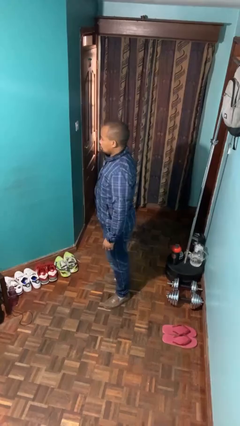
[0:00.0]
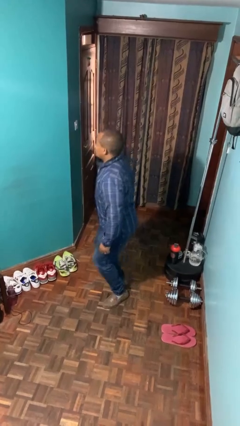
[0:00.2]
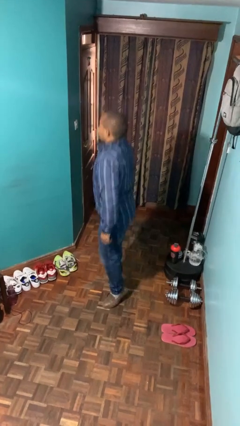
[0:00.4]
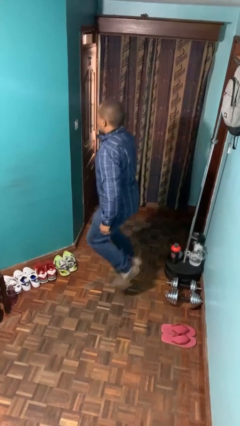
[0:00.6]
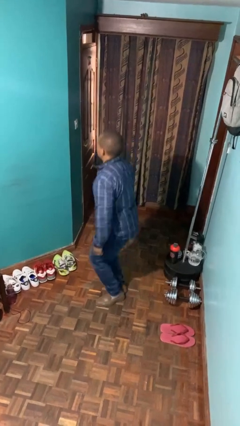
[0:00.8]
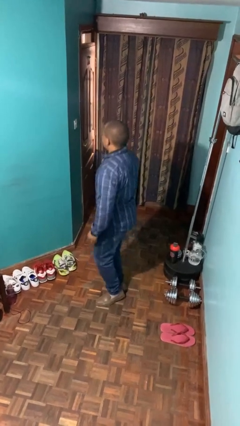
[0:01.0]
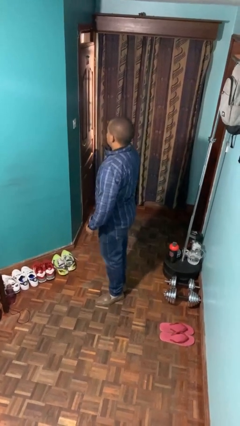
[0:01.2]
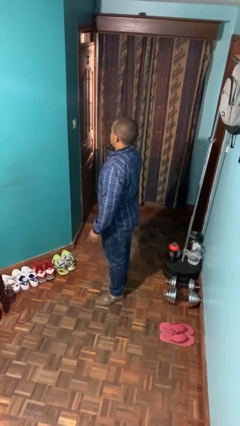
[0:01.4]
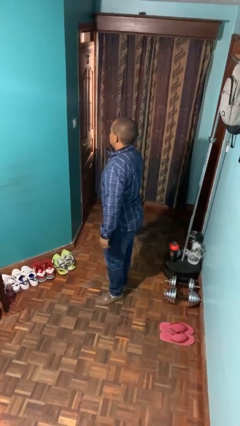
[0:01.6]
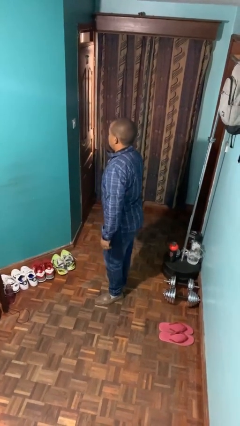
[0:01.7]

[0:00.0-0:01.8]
person jumps

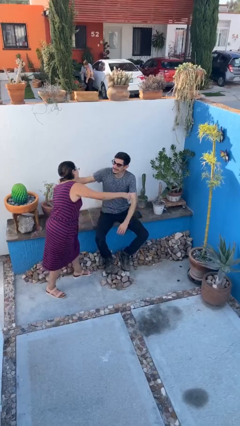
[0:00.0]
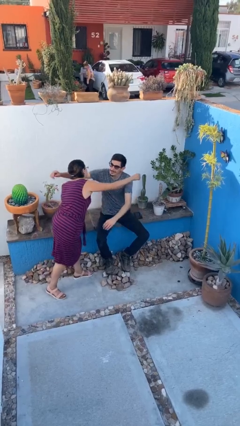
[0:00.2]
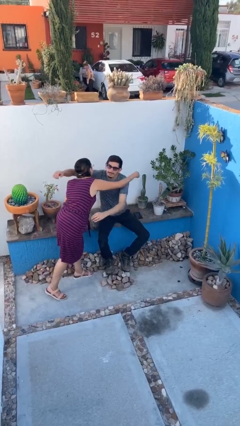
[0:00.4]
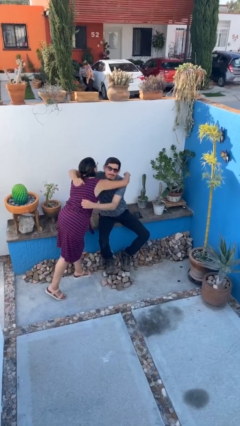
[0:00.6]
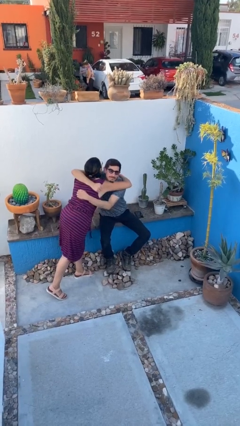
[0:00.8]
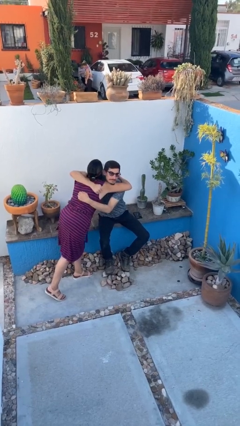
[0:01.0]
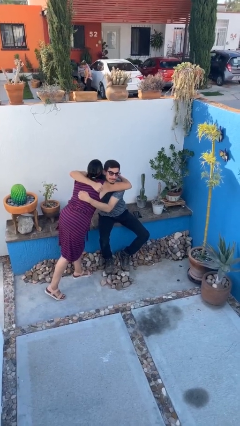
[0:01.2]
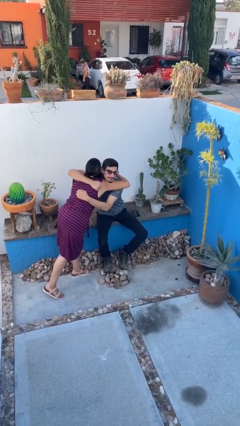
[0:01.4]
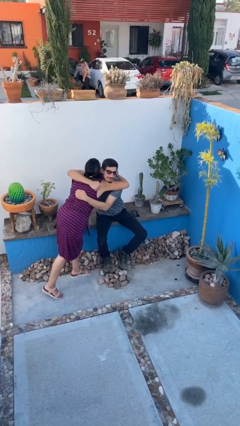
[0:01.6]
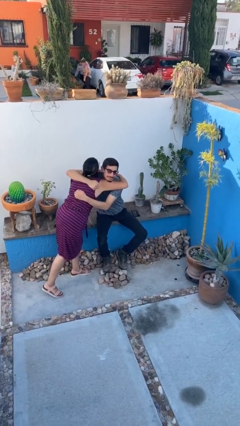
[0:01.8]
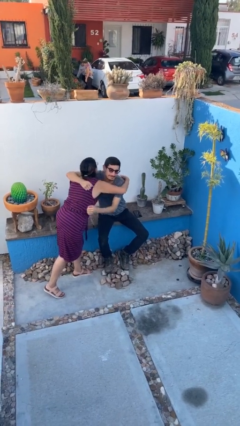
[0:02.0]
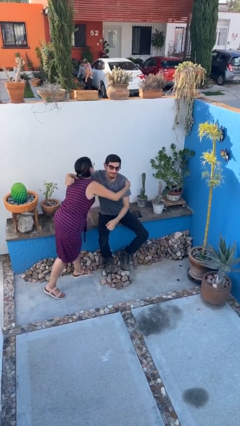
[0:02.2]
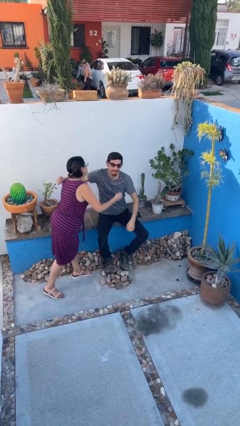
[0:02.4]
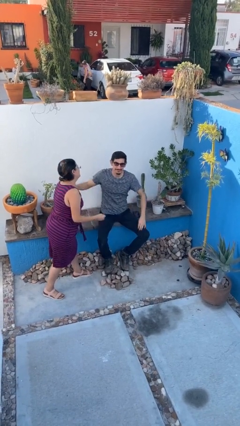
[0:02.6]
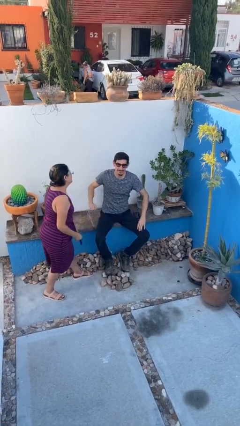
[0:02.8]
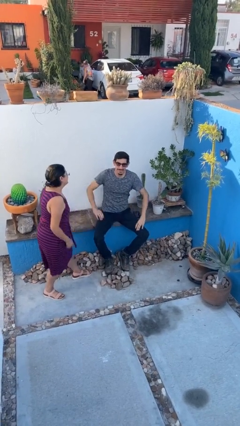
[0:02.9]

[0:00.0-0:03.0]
person embraces person

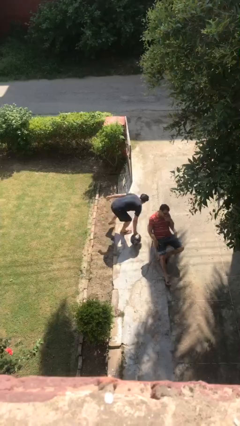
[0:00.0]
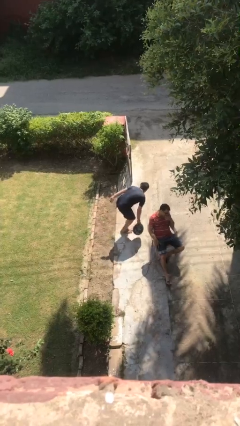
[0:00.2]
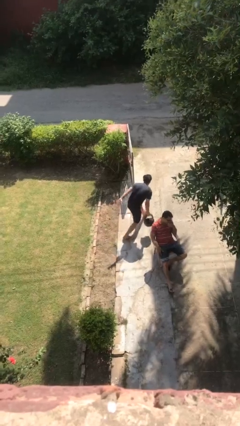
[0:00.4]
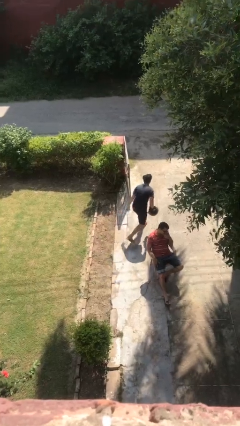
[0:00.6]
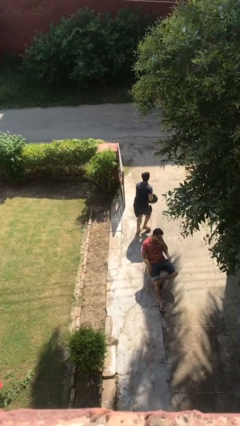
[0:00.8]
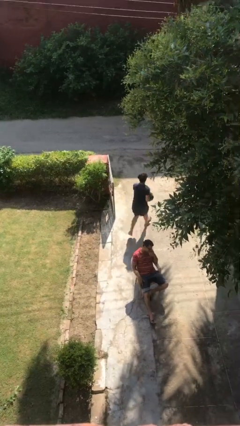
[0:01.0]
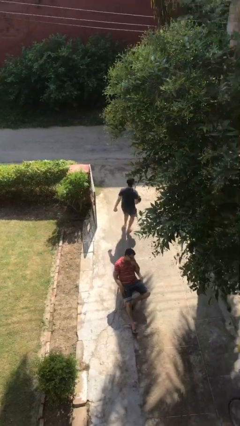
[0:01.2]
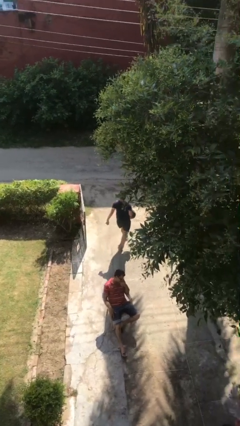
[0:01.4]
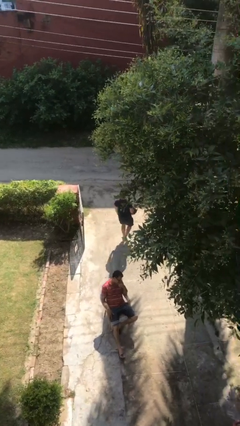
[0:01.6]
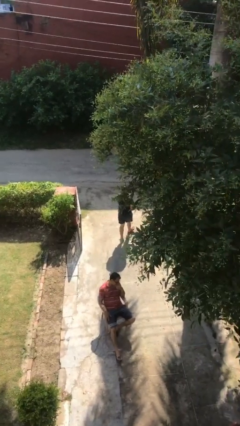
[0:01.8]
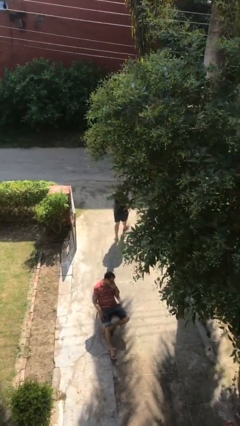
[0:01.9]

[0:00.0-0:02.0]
person steals object from person

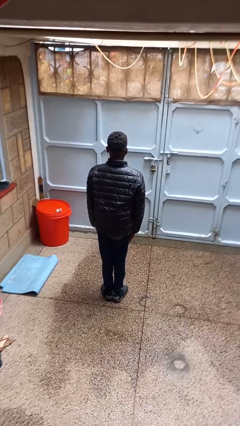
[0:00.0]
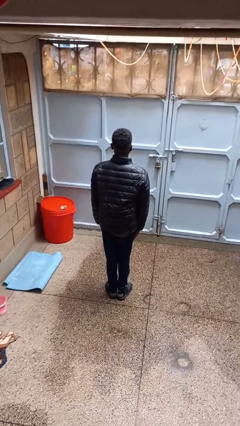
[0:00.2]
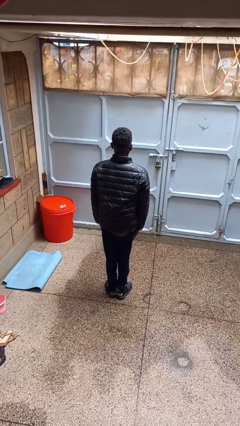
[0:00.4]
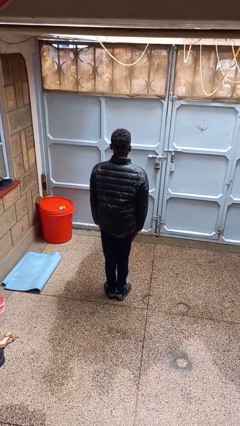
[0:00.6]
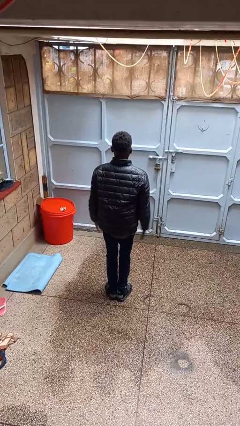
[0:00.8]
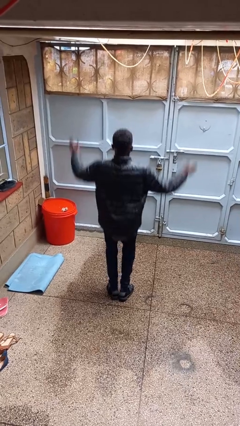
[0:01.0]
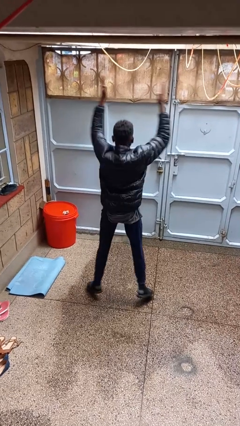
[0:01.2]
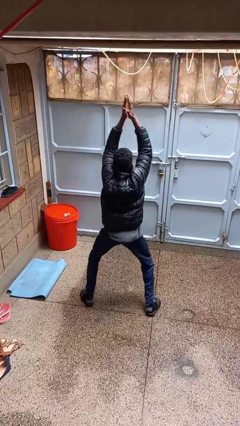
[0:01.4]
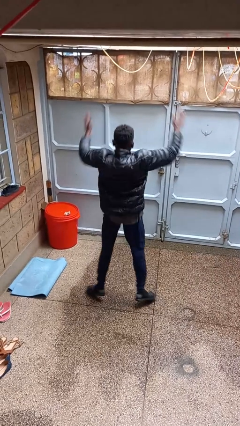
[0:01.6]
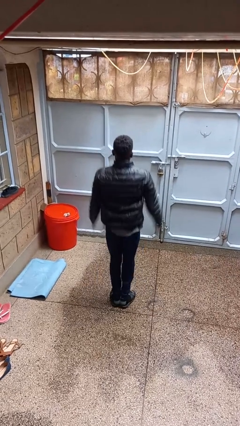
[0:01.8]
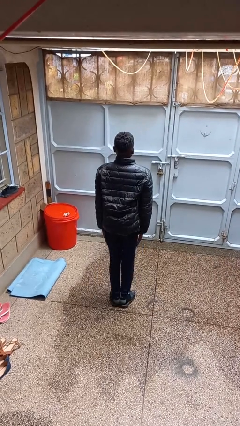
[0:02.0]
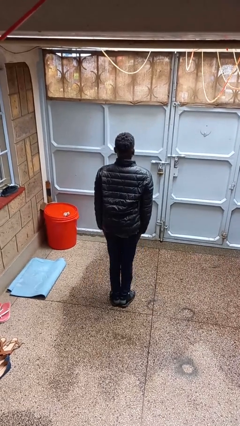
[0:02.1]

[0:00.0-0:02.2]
person exercises with jumping jacks

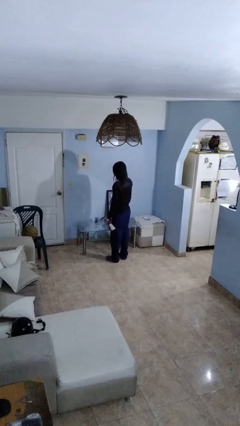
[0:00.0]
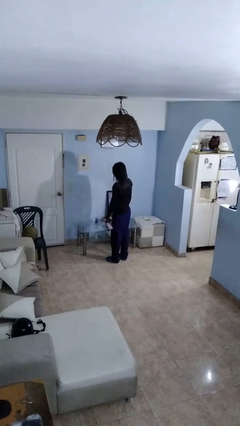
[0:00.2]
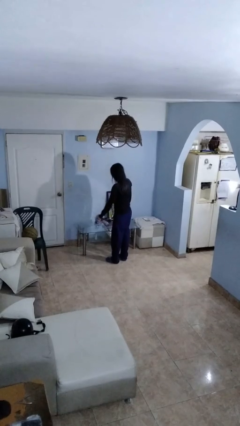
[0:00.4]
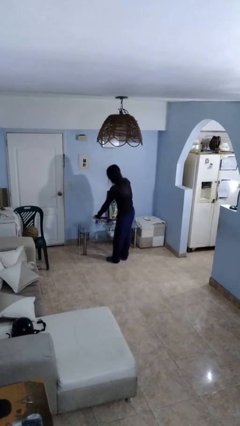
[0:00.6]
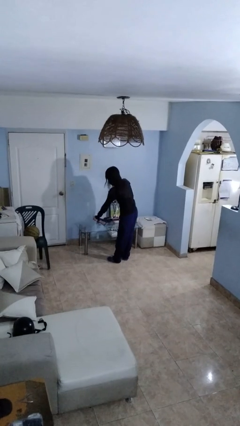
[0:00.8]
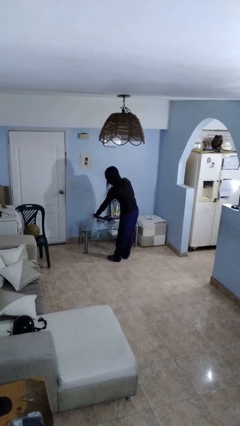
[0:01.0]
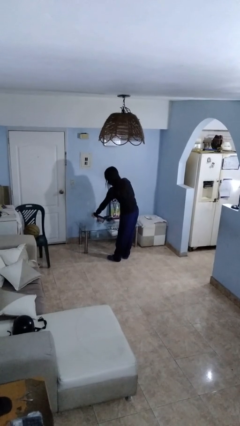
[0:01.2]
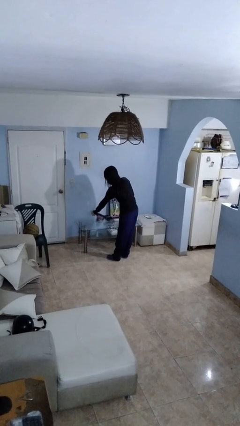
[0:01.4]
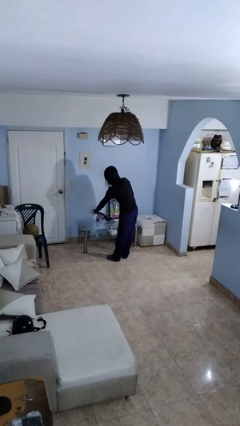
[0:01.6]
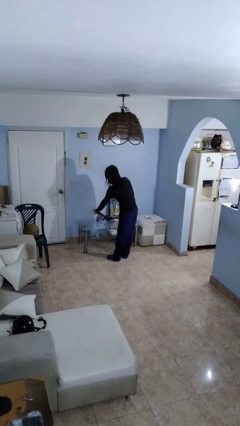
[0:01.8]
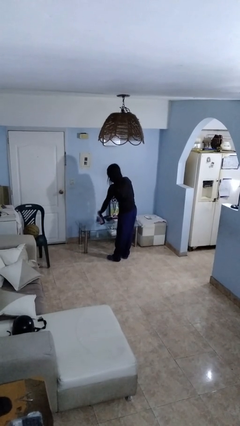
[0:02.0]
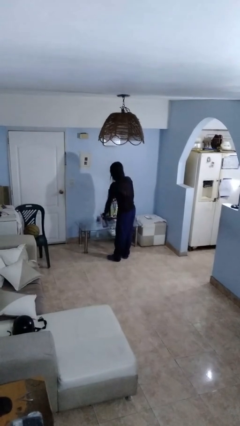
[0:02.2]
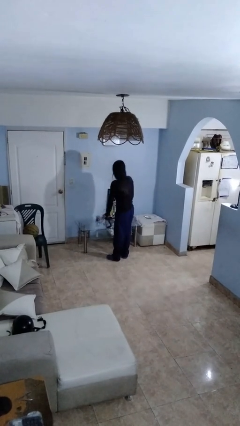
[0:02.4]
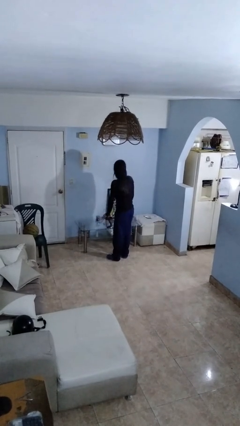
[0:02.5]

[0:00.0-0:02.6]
person sprays from bottle

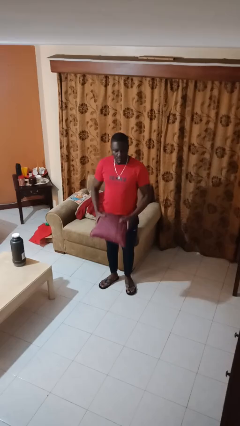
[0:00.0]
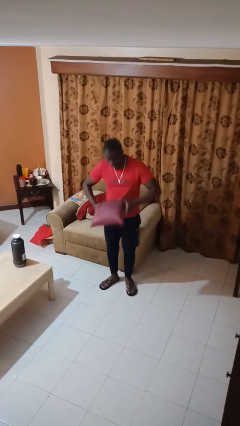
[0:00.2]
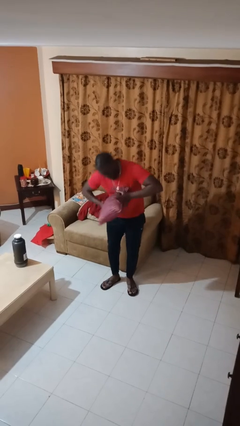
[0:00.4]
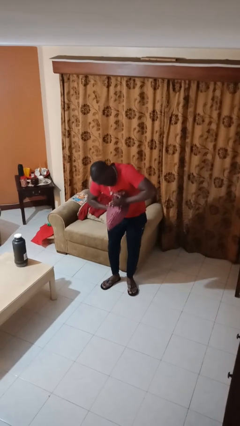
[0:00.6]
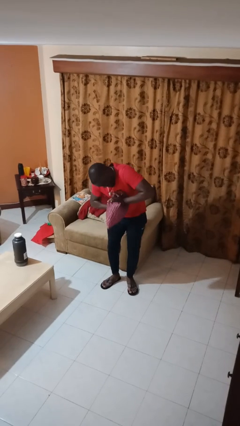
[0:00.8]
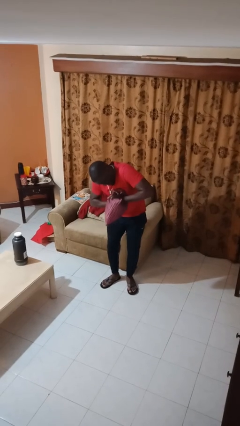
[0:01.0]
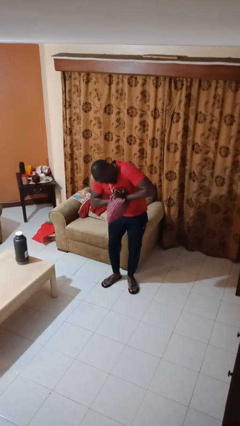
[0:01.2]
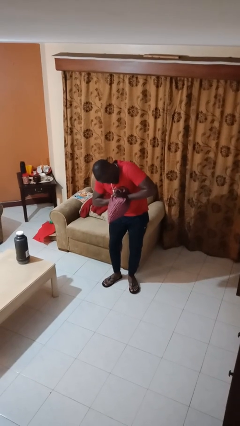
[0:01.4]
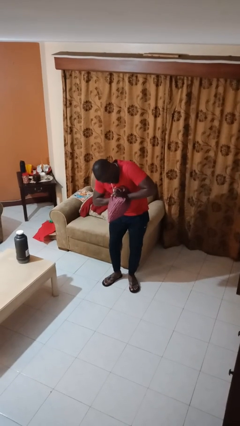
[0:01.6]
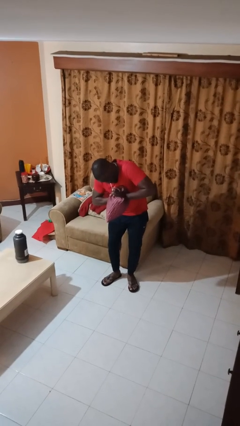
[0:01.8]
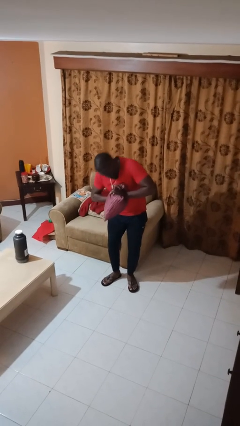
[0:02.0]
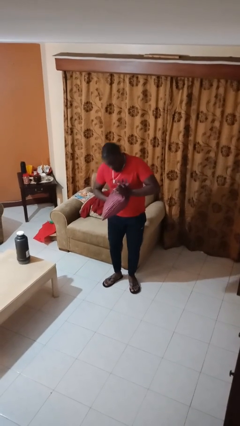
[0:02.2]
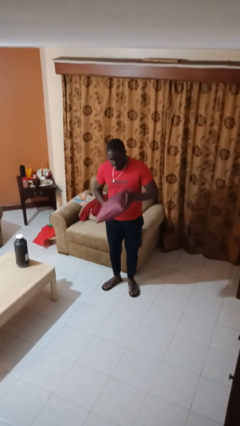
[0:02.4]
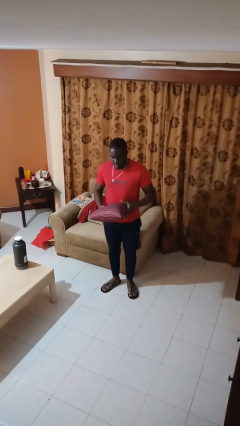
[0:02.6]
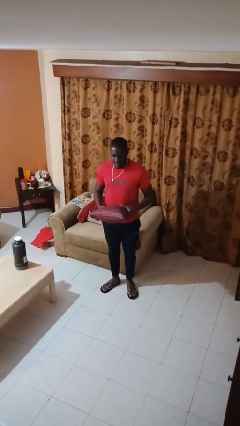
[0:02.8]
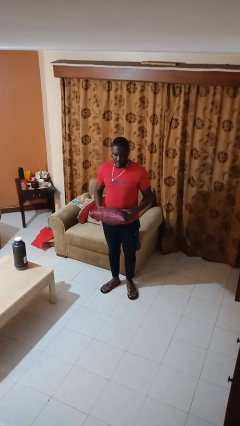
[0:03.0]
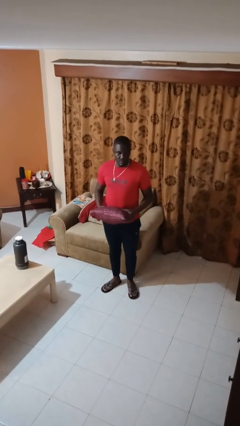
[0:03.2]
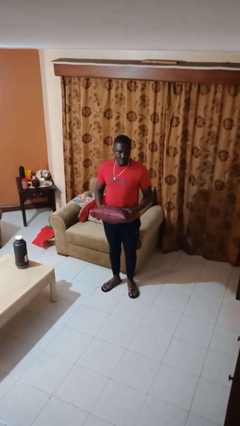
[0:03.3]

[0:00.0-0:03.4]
person squeezes object

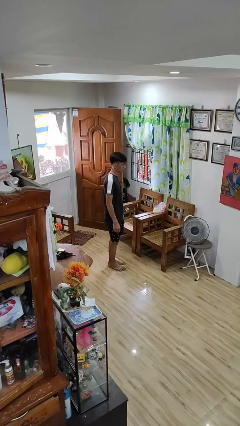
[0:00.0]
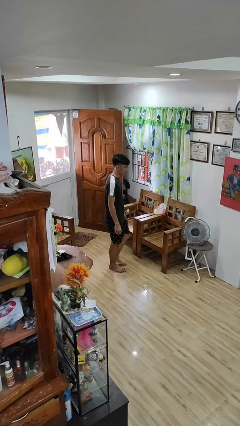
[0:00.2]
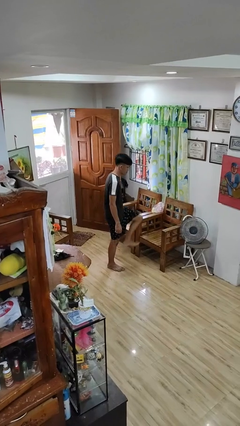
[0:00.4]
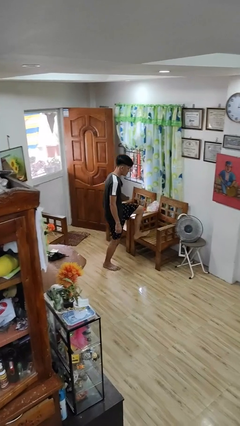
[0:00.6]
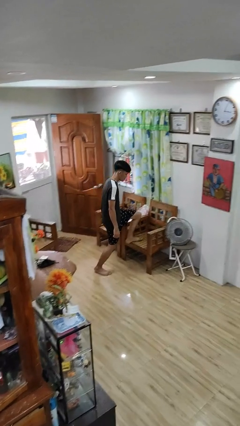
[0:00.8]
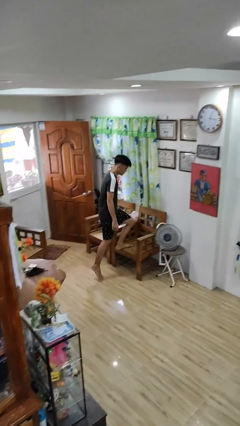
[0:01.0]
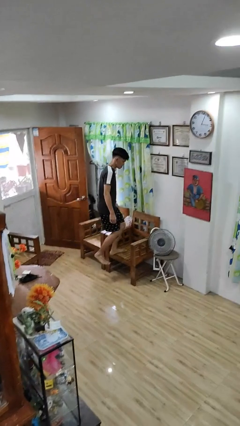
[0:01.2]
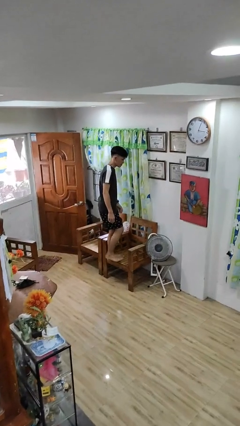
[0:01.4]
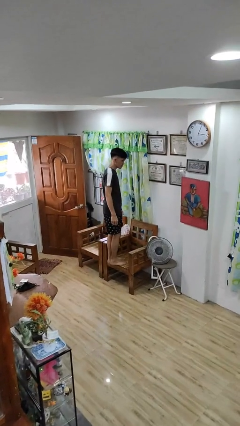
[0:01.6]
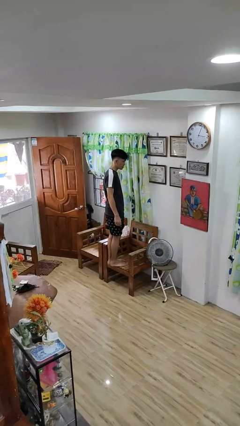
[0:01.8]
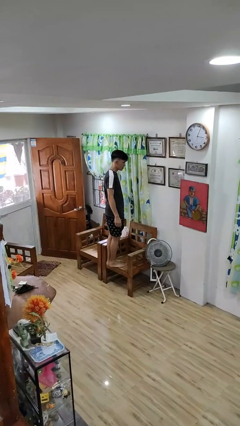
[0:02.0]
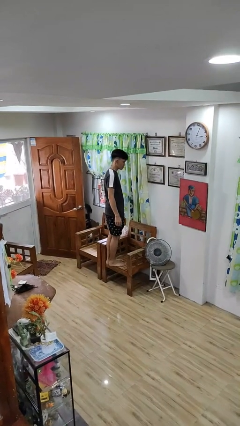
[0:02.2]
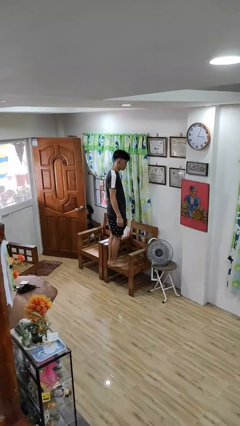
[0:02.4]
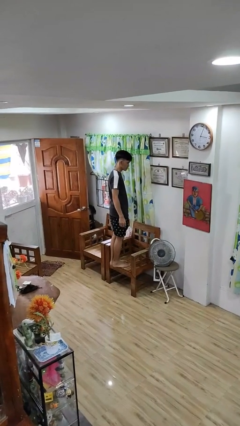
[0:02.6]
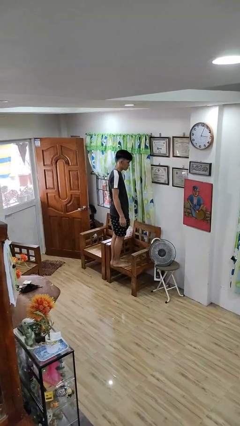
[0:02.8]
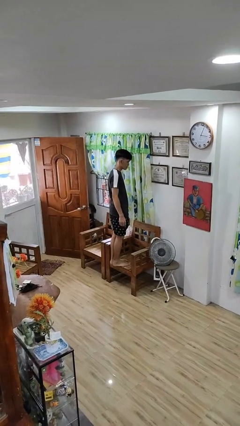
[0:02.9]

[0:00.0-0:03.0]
person climbs on chair
